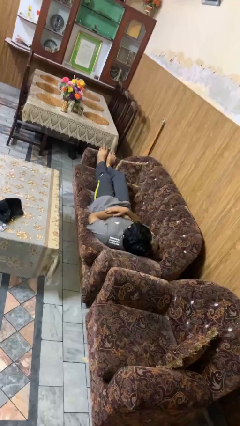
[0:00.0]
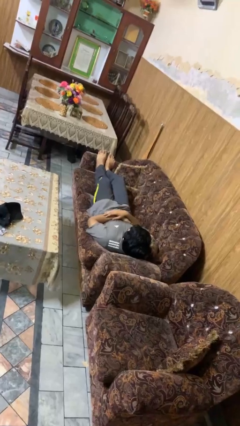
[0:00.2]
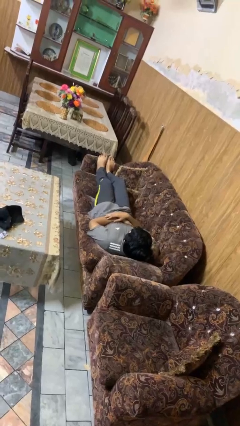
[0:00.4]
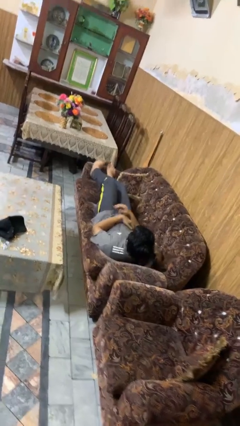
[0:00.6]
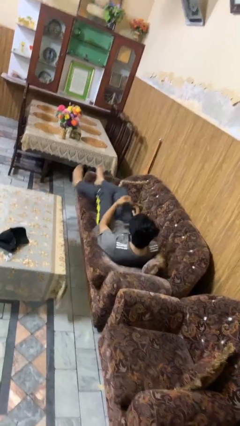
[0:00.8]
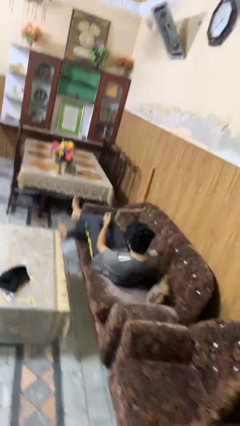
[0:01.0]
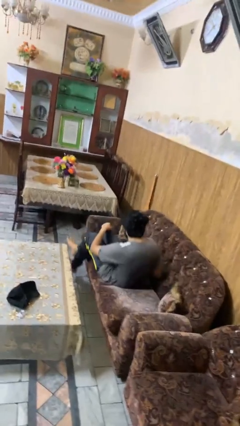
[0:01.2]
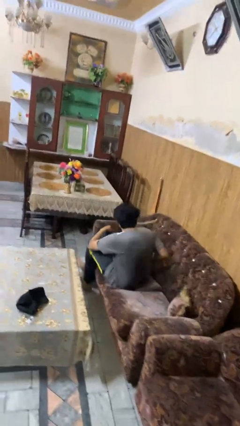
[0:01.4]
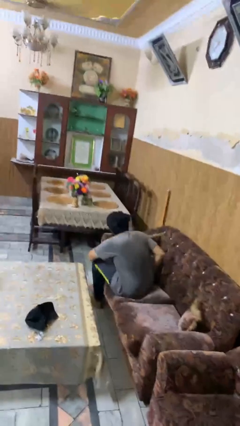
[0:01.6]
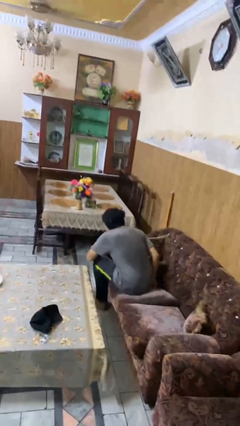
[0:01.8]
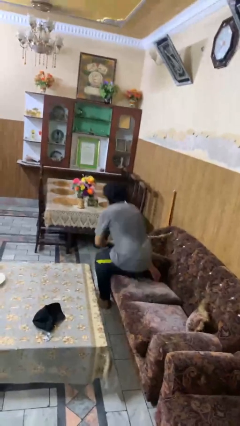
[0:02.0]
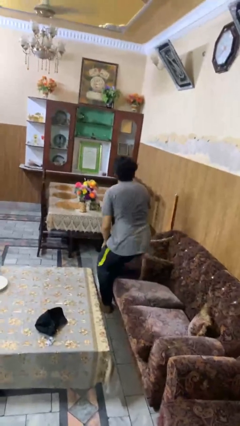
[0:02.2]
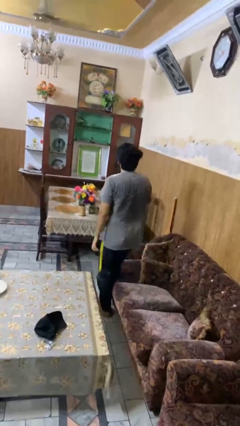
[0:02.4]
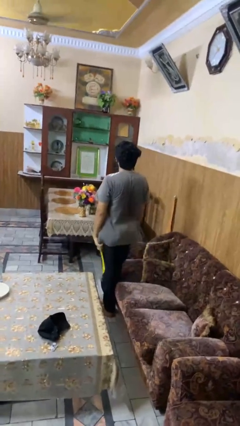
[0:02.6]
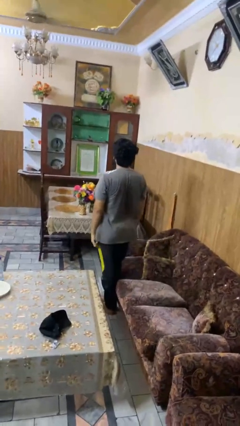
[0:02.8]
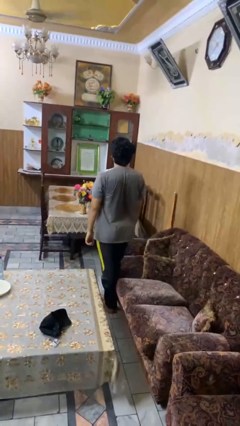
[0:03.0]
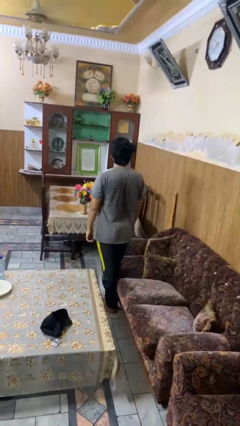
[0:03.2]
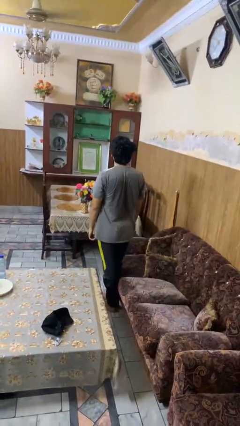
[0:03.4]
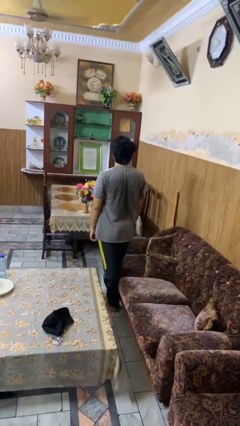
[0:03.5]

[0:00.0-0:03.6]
person stands up

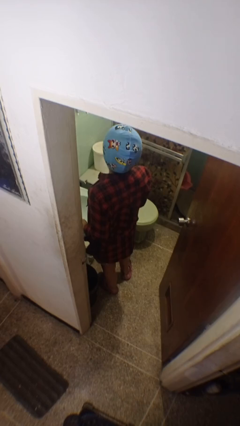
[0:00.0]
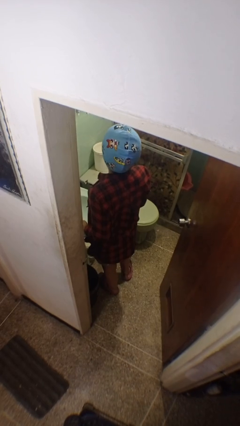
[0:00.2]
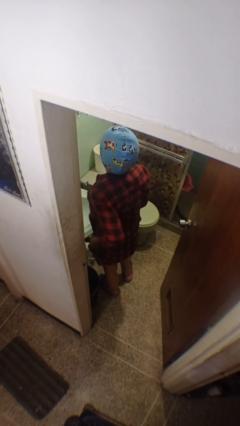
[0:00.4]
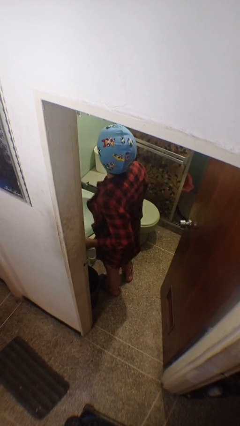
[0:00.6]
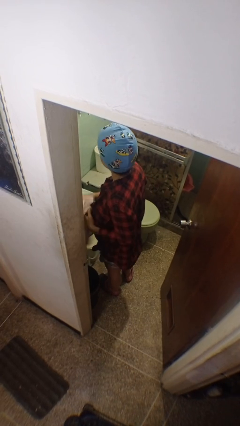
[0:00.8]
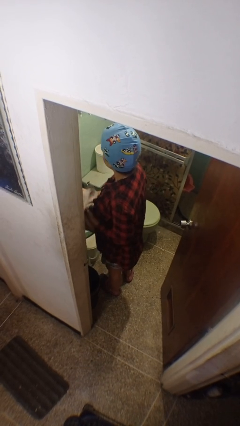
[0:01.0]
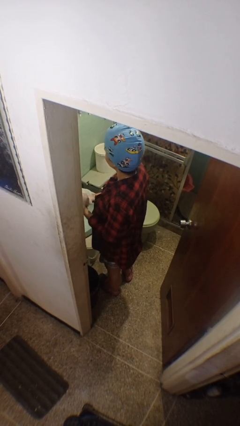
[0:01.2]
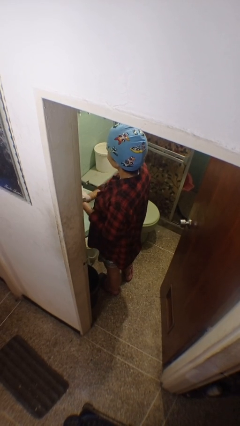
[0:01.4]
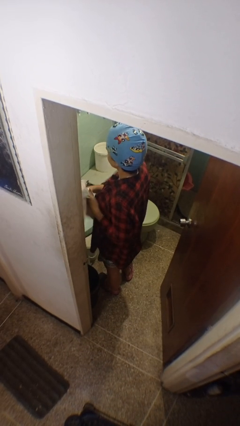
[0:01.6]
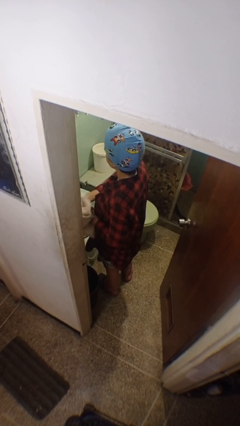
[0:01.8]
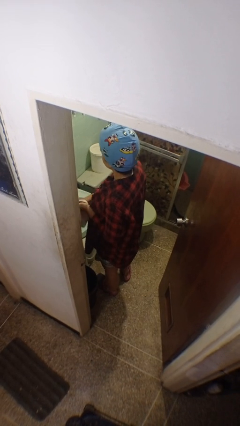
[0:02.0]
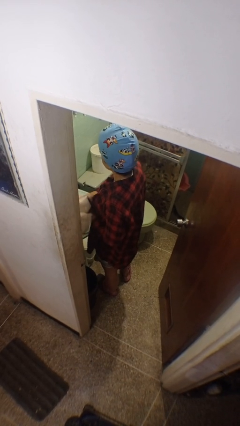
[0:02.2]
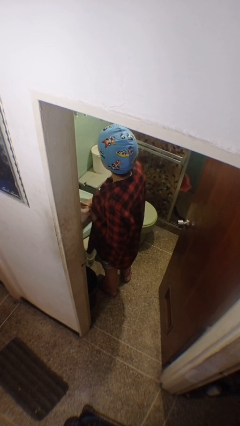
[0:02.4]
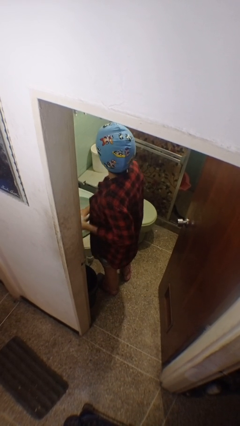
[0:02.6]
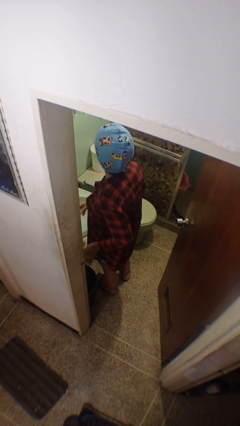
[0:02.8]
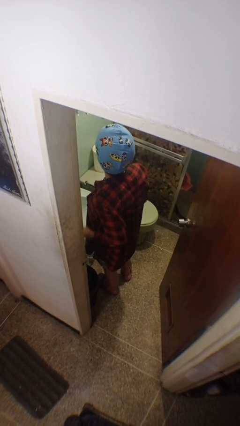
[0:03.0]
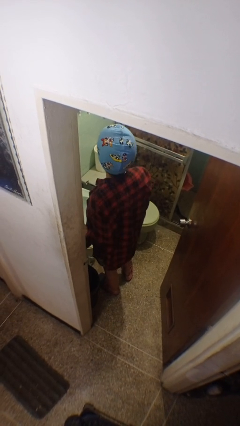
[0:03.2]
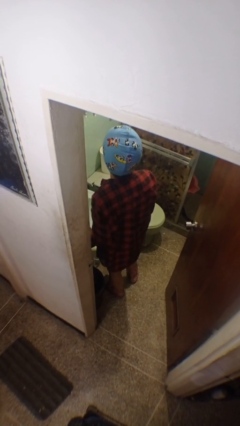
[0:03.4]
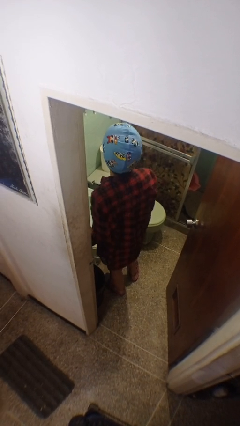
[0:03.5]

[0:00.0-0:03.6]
person dries hands with towel

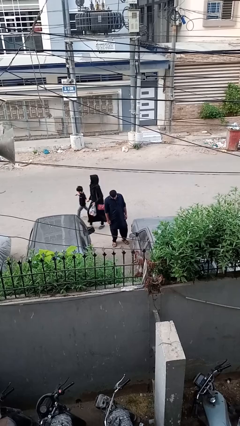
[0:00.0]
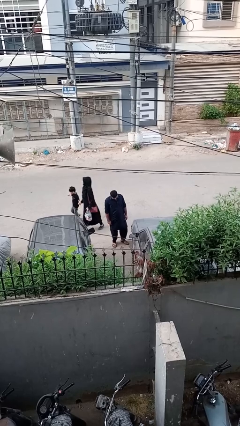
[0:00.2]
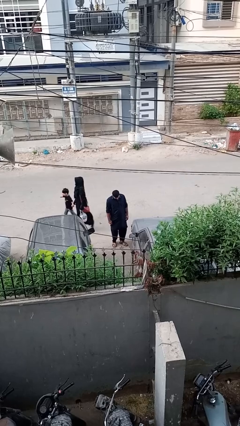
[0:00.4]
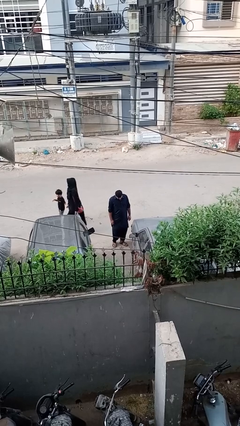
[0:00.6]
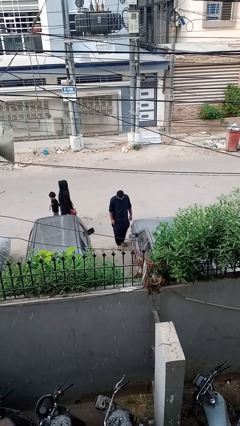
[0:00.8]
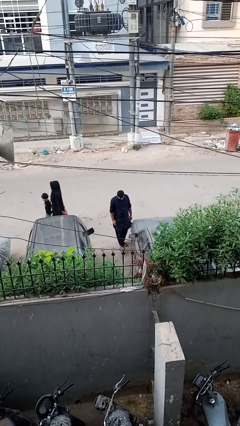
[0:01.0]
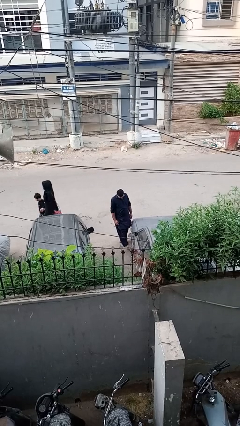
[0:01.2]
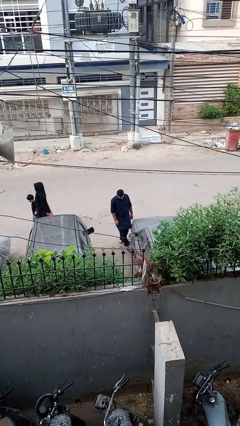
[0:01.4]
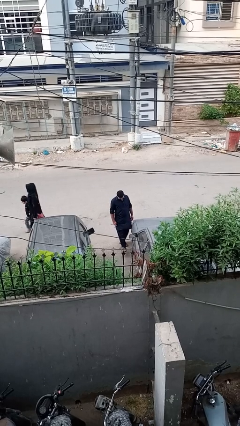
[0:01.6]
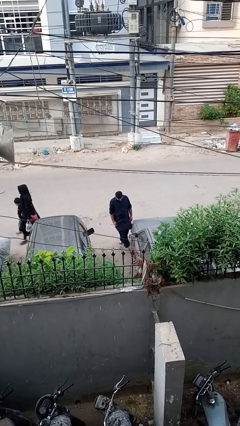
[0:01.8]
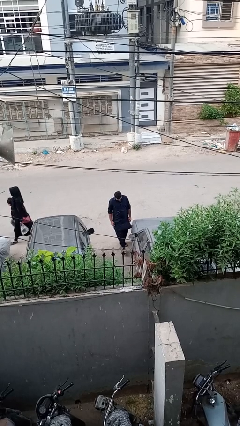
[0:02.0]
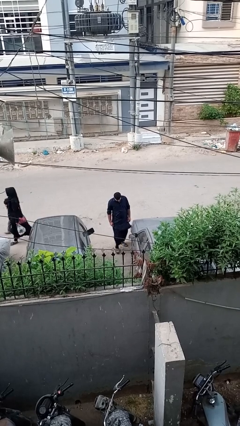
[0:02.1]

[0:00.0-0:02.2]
person kicks car tires

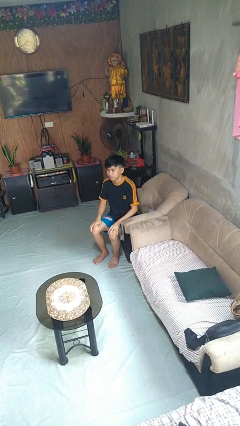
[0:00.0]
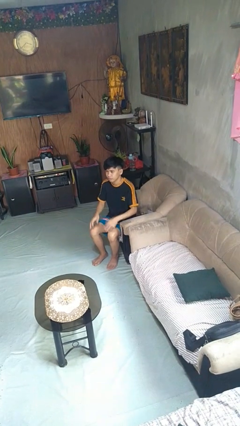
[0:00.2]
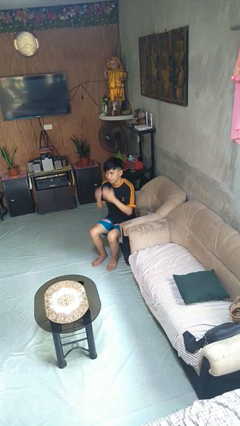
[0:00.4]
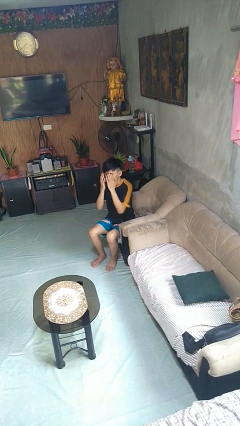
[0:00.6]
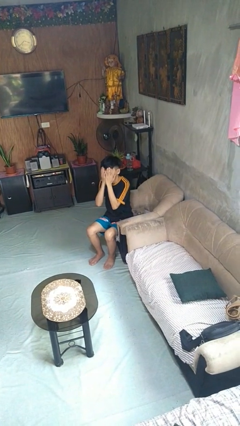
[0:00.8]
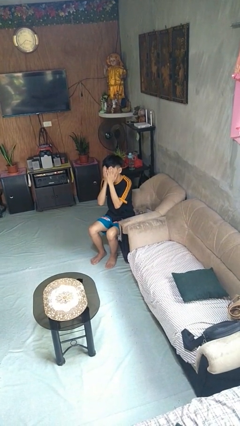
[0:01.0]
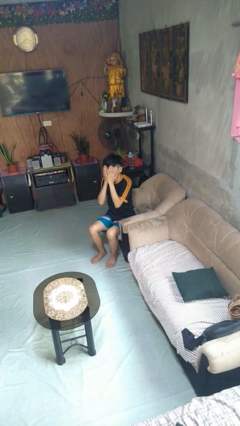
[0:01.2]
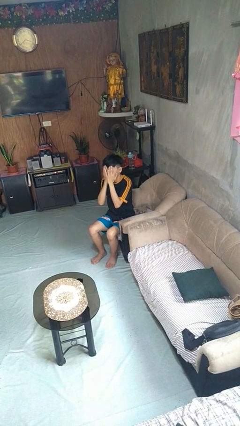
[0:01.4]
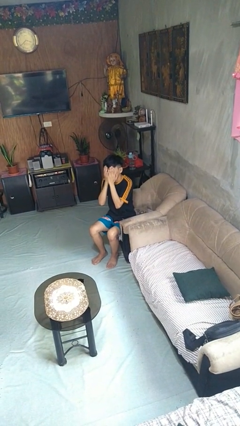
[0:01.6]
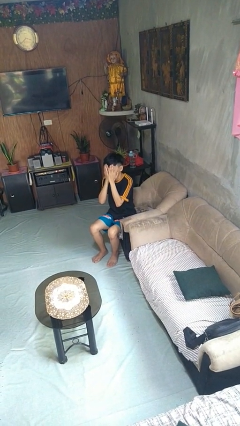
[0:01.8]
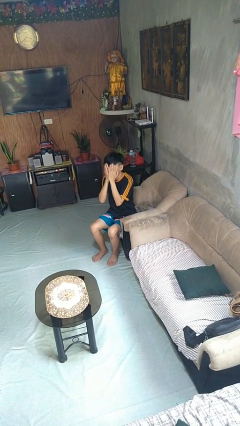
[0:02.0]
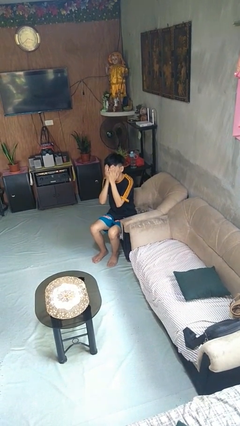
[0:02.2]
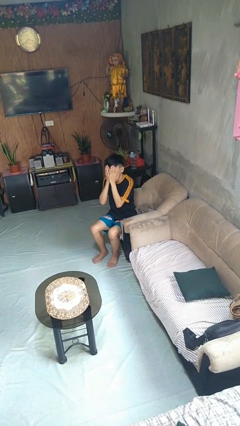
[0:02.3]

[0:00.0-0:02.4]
person covers face with hands

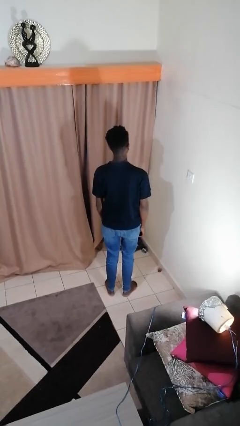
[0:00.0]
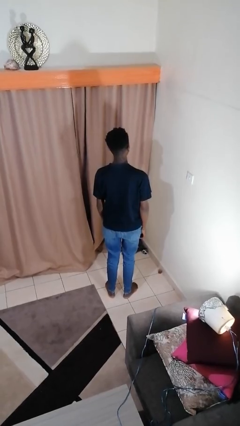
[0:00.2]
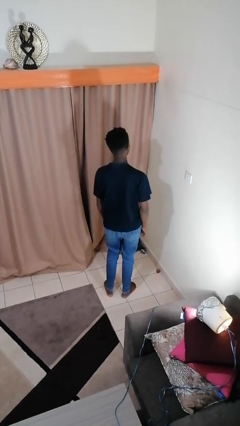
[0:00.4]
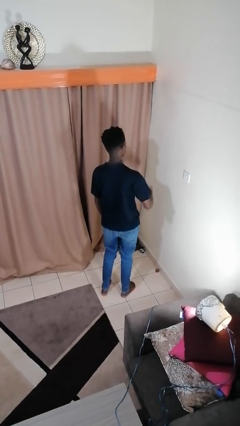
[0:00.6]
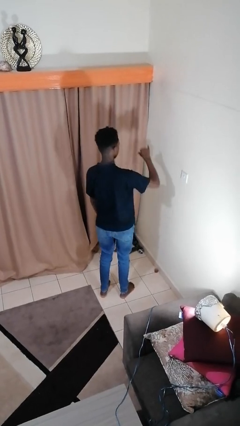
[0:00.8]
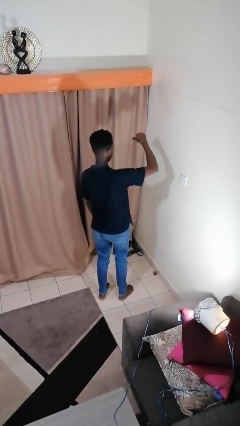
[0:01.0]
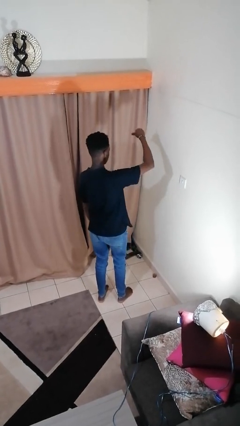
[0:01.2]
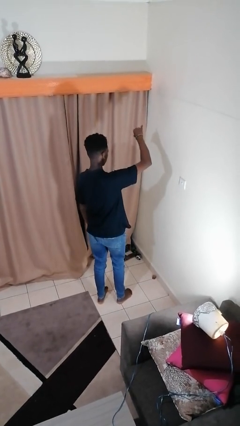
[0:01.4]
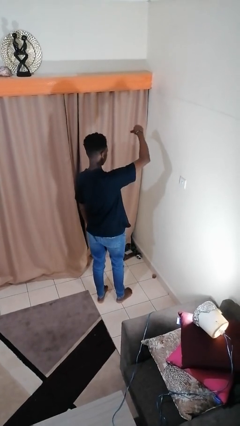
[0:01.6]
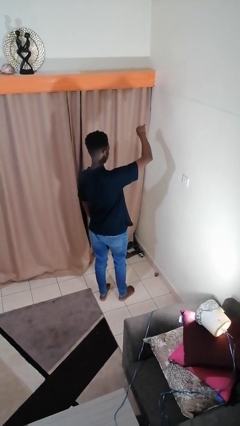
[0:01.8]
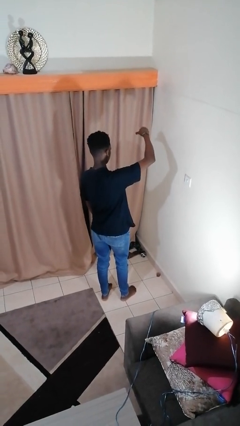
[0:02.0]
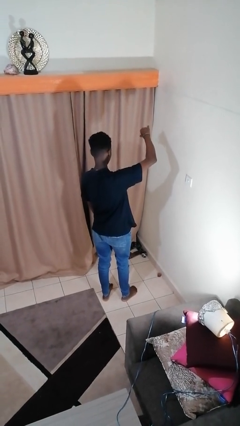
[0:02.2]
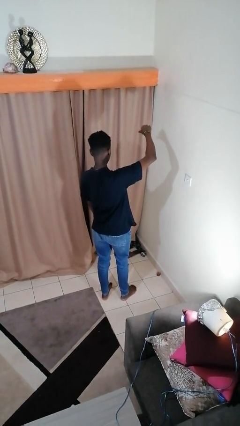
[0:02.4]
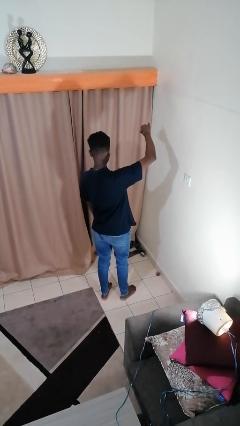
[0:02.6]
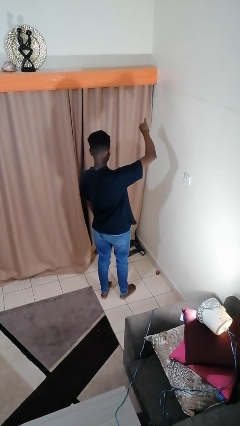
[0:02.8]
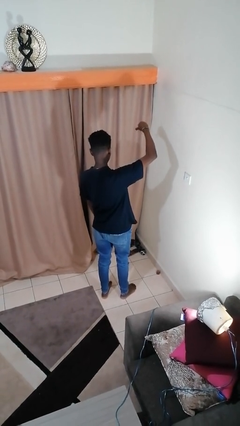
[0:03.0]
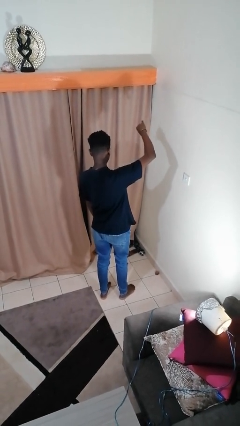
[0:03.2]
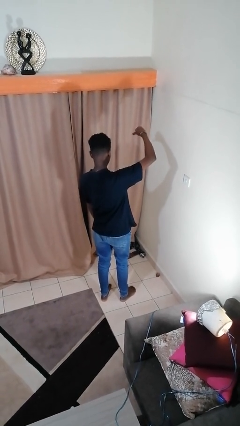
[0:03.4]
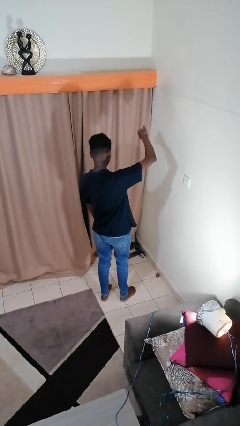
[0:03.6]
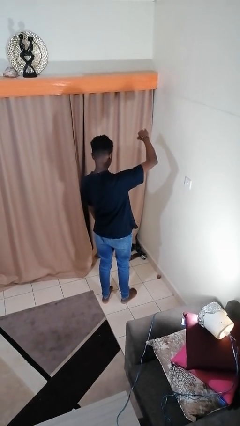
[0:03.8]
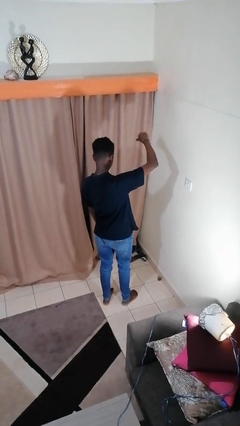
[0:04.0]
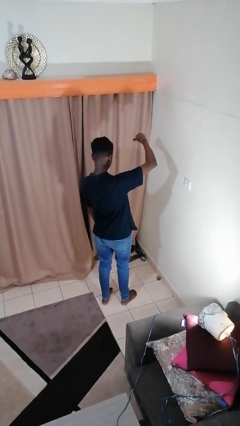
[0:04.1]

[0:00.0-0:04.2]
person gestures hang loose

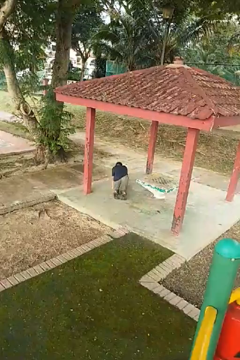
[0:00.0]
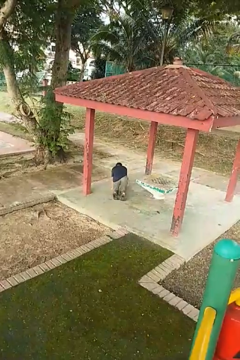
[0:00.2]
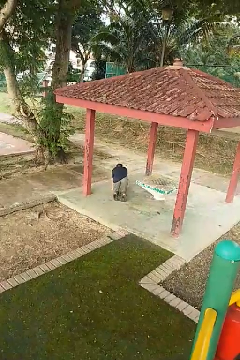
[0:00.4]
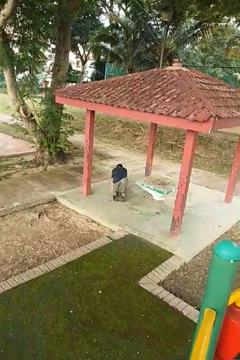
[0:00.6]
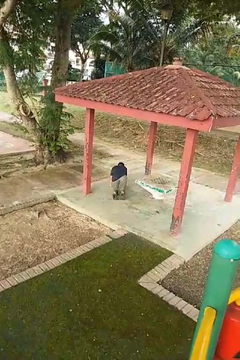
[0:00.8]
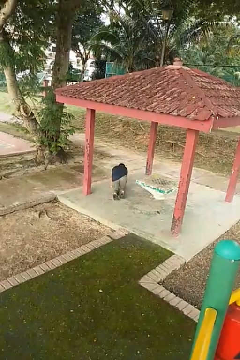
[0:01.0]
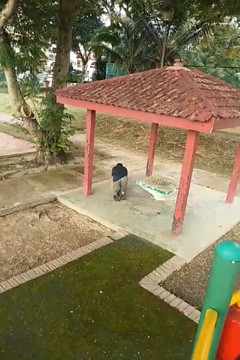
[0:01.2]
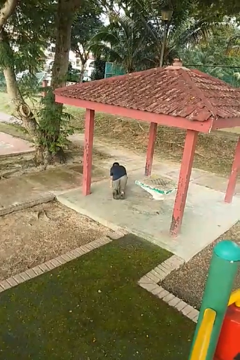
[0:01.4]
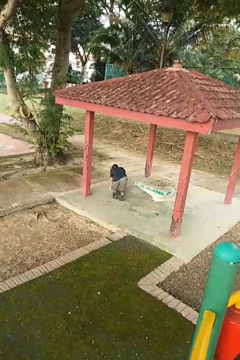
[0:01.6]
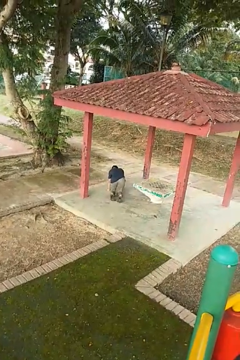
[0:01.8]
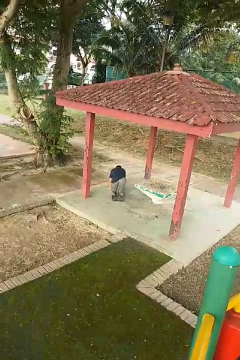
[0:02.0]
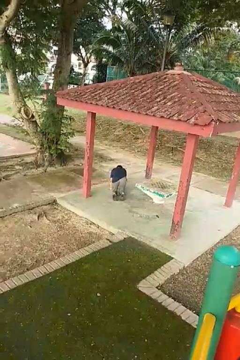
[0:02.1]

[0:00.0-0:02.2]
person crawls

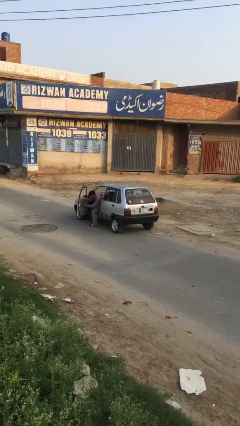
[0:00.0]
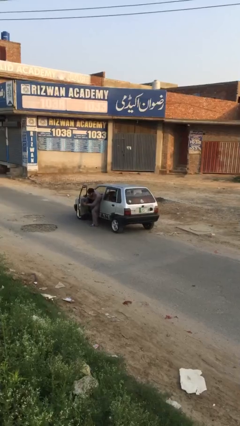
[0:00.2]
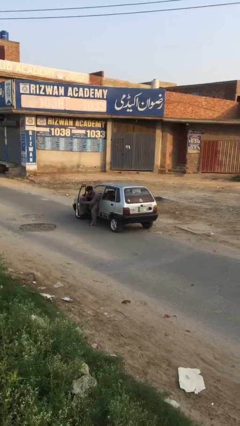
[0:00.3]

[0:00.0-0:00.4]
car drops off person
